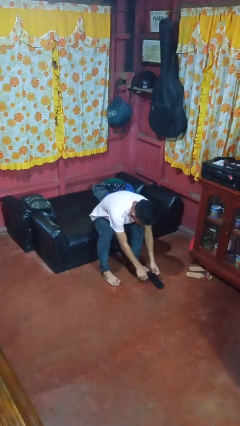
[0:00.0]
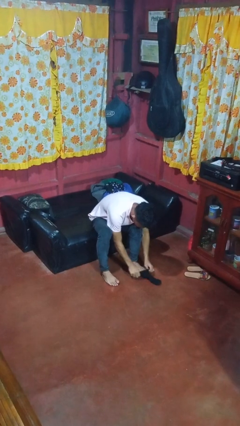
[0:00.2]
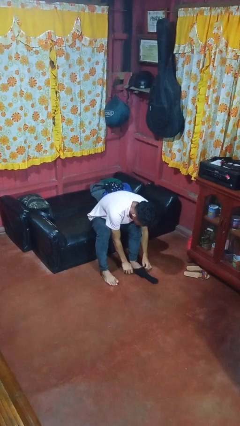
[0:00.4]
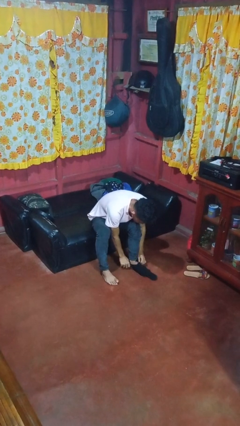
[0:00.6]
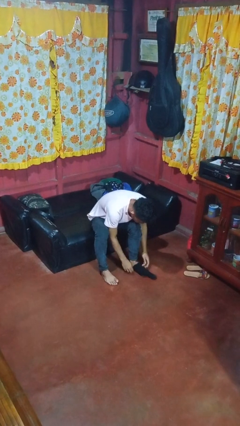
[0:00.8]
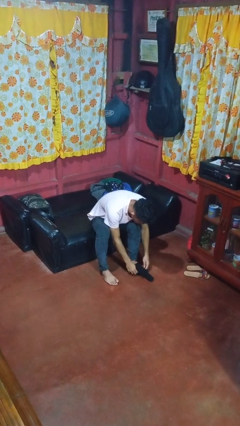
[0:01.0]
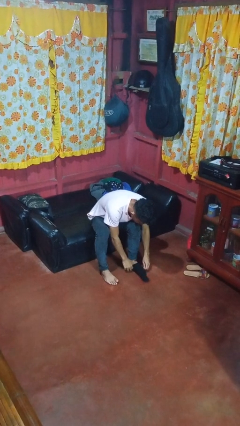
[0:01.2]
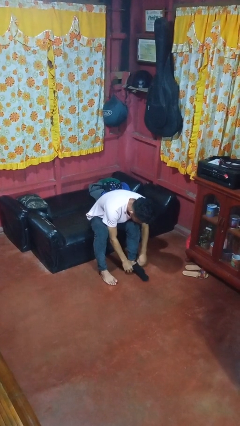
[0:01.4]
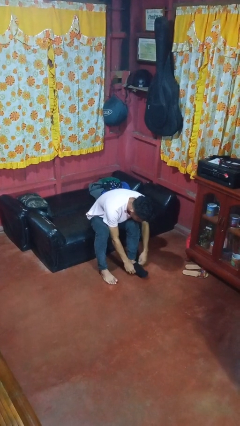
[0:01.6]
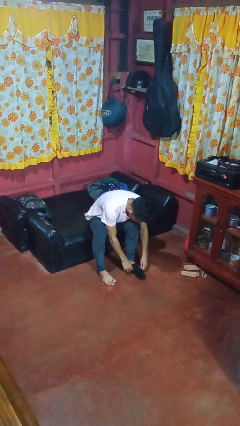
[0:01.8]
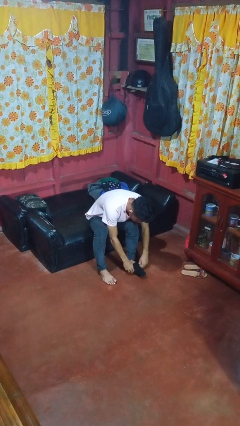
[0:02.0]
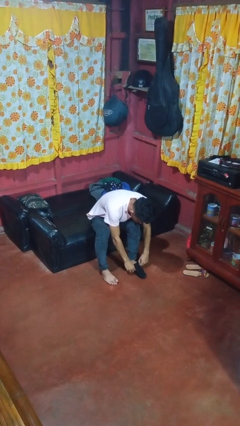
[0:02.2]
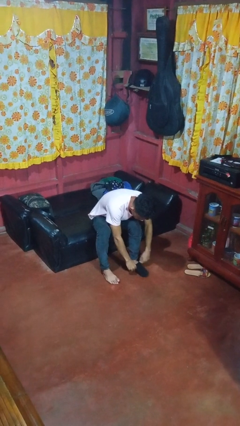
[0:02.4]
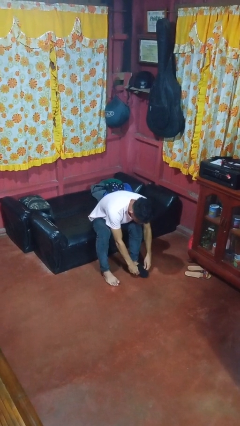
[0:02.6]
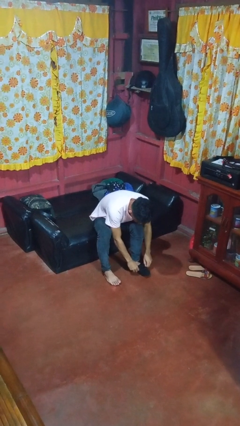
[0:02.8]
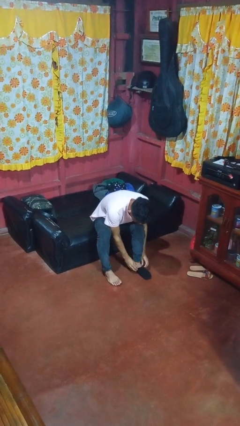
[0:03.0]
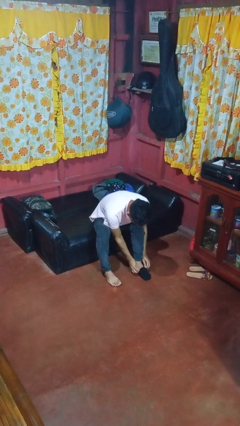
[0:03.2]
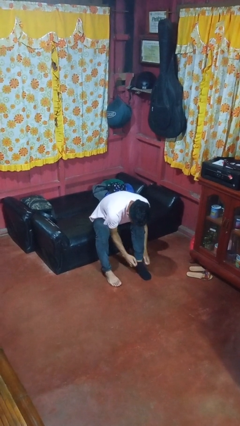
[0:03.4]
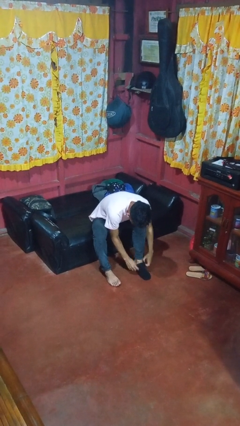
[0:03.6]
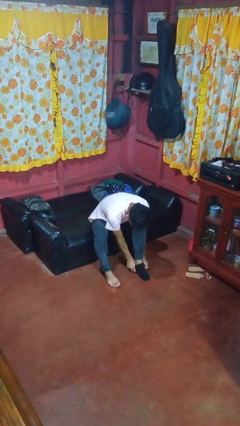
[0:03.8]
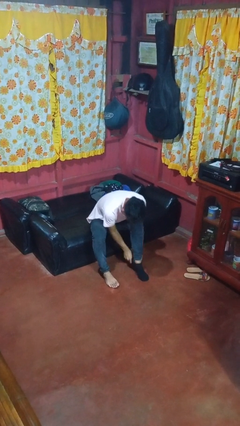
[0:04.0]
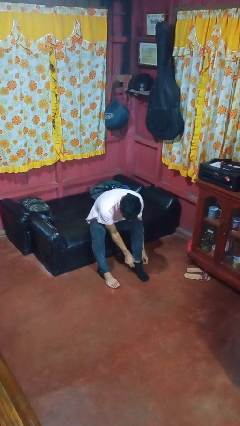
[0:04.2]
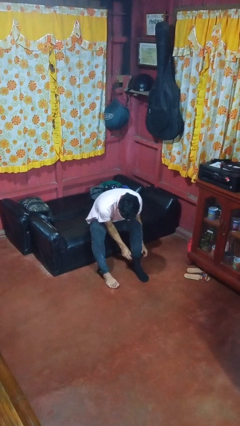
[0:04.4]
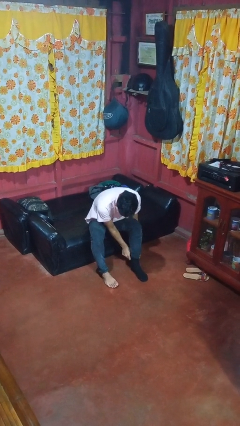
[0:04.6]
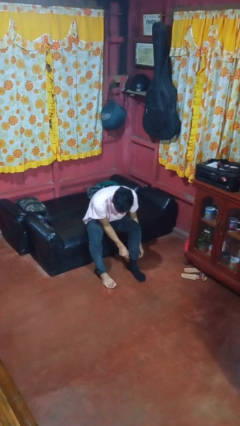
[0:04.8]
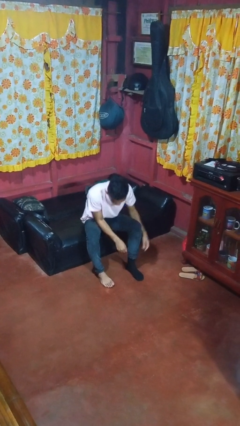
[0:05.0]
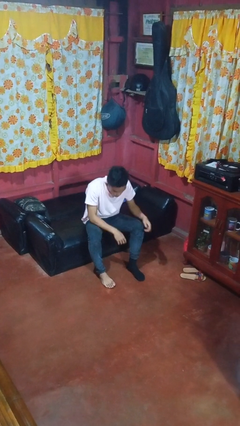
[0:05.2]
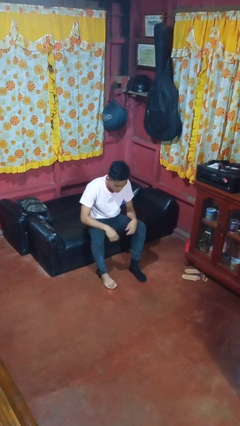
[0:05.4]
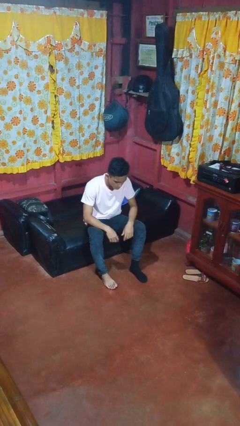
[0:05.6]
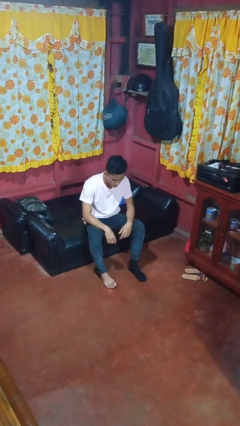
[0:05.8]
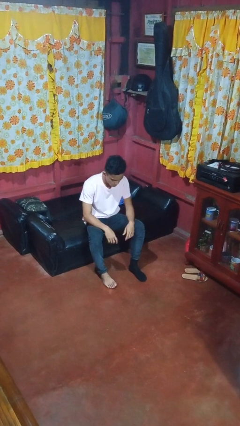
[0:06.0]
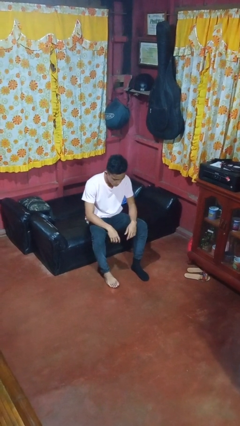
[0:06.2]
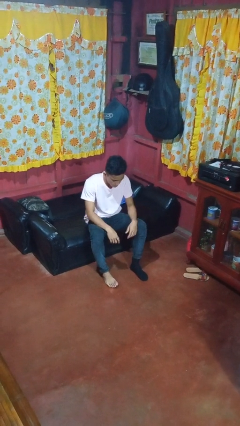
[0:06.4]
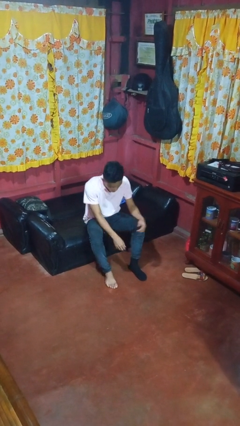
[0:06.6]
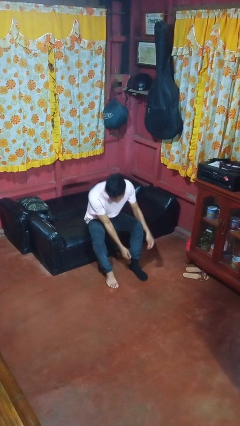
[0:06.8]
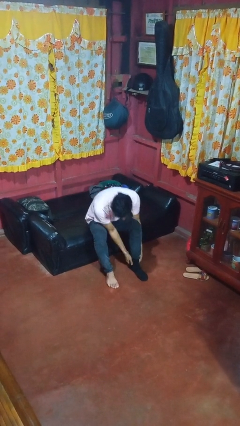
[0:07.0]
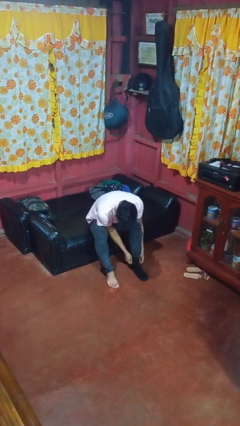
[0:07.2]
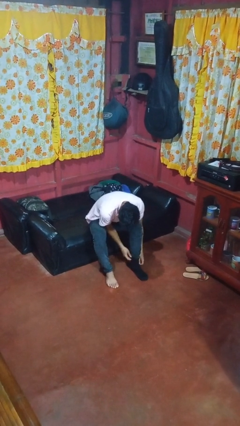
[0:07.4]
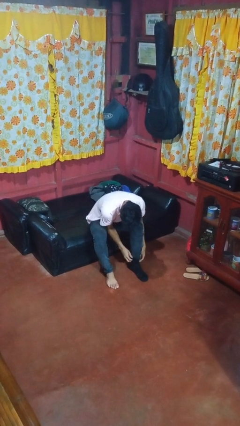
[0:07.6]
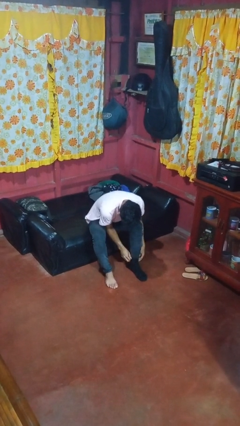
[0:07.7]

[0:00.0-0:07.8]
person puts on socks

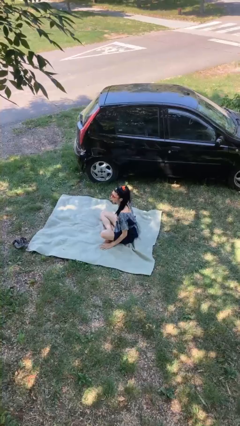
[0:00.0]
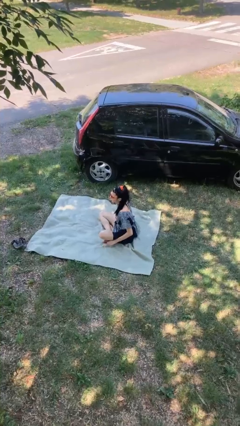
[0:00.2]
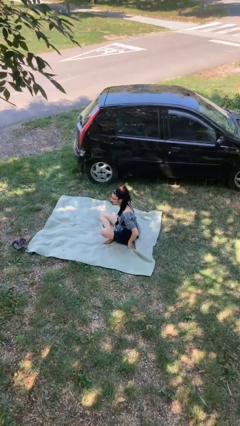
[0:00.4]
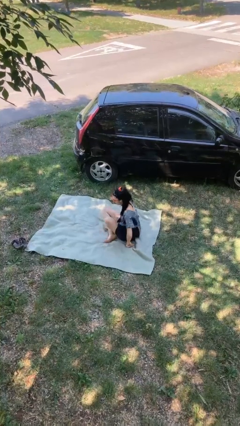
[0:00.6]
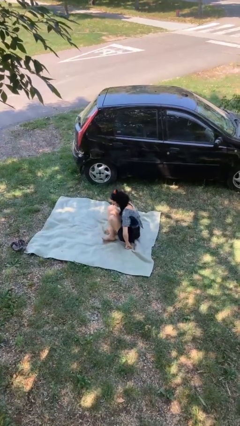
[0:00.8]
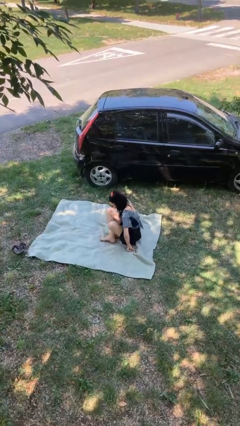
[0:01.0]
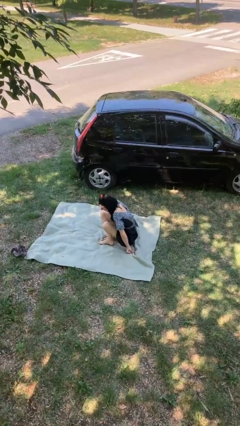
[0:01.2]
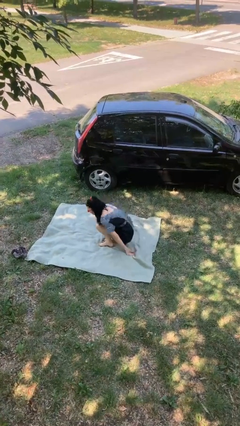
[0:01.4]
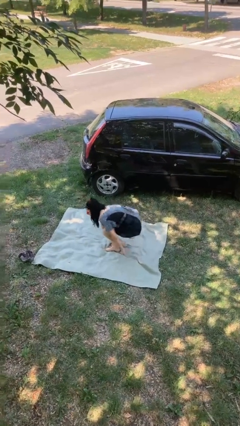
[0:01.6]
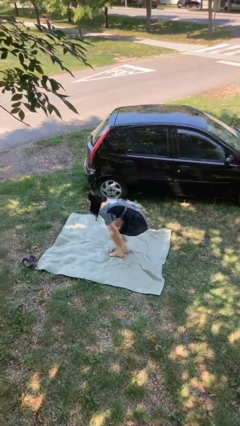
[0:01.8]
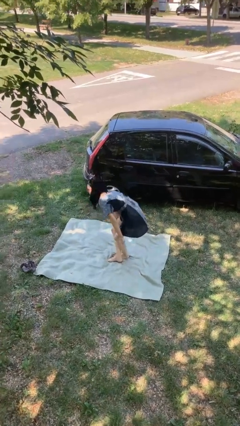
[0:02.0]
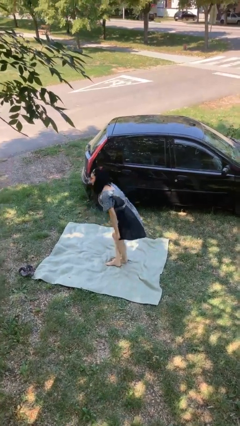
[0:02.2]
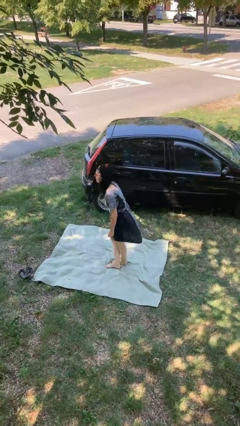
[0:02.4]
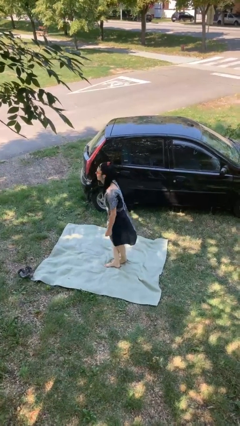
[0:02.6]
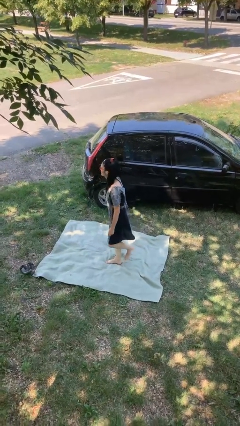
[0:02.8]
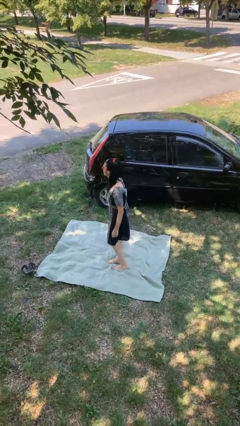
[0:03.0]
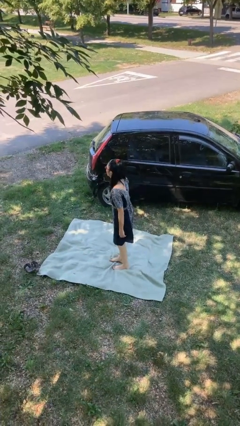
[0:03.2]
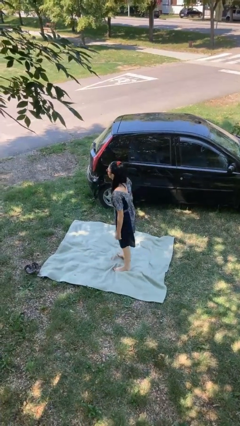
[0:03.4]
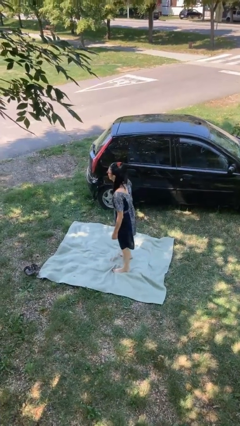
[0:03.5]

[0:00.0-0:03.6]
person stands up from floor

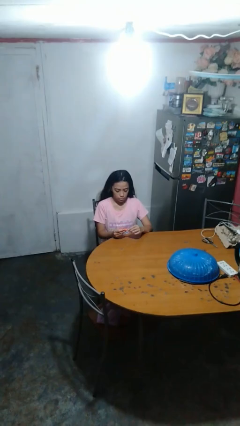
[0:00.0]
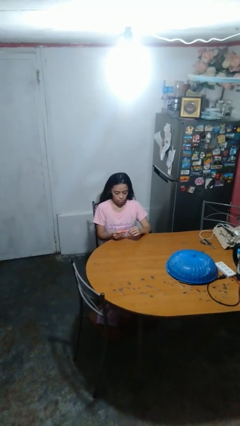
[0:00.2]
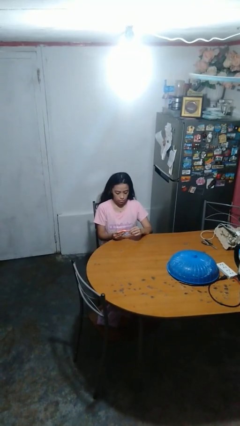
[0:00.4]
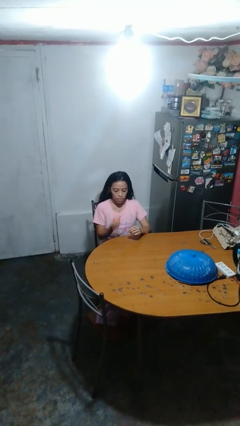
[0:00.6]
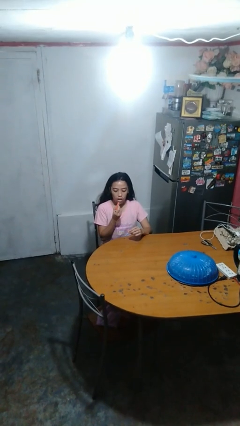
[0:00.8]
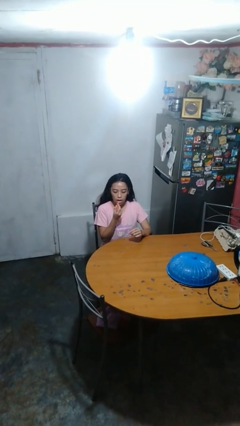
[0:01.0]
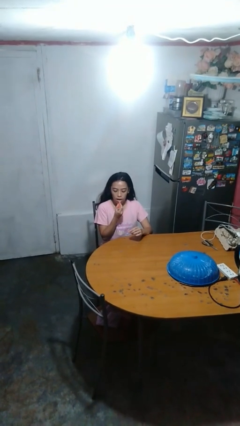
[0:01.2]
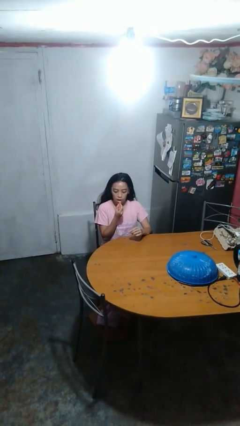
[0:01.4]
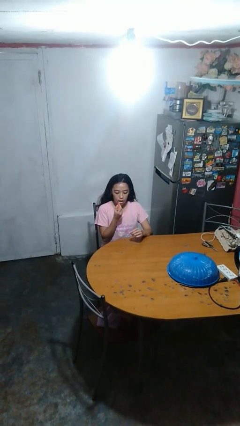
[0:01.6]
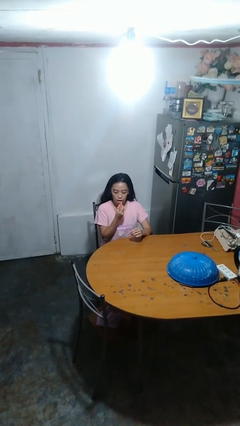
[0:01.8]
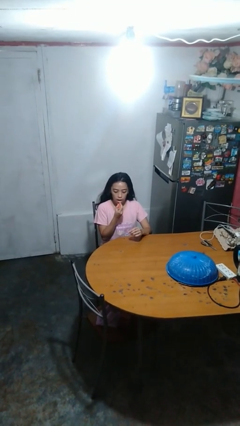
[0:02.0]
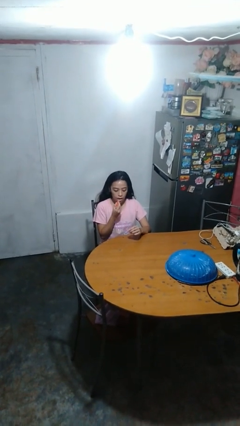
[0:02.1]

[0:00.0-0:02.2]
person applies lip makeup

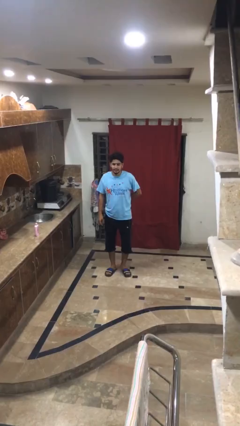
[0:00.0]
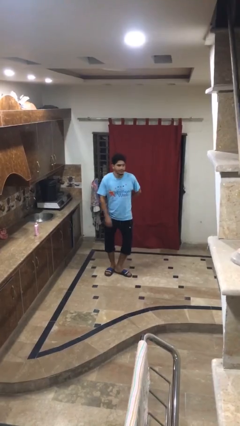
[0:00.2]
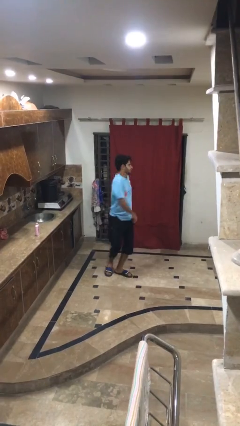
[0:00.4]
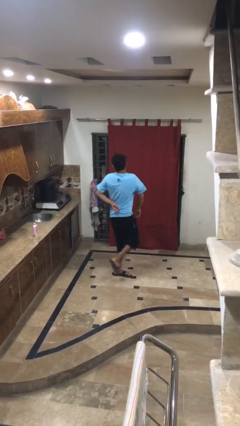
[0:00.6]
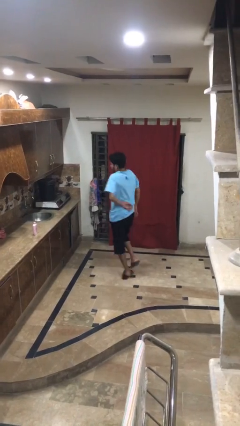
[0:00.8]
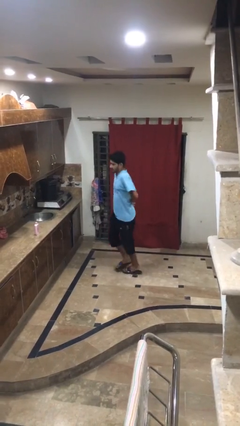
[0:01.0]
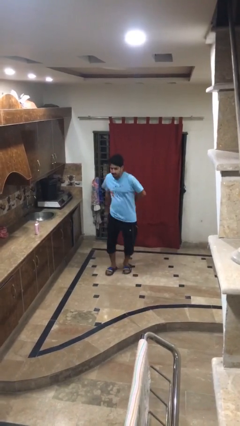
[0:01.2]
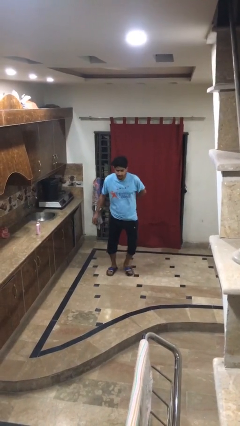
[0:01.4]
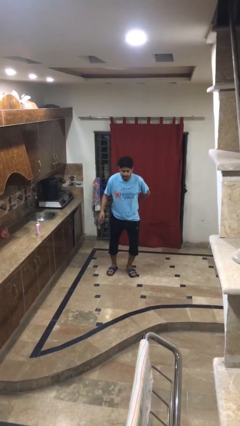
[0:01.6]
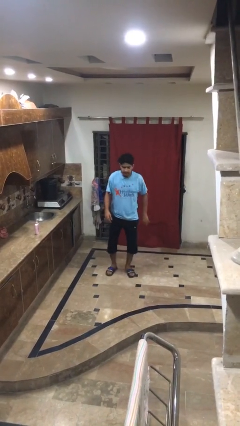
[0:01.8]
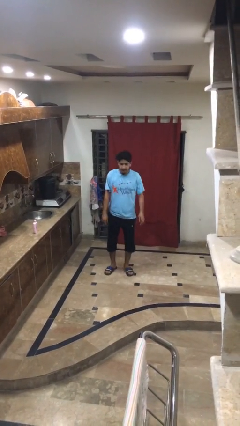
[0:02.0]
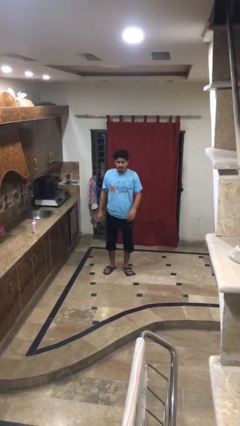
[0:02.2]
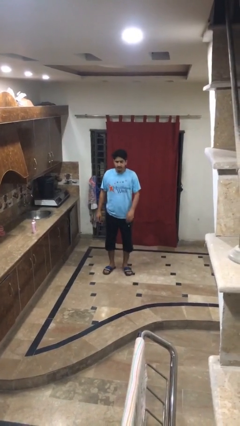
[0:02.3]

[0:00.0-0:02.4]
person twirls

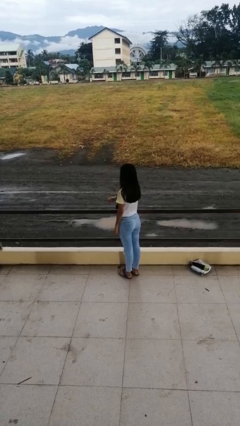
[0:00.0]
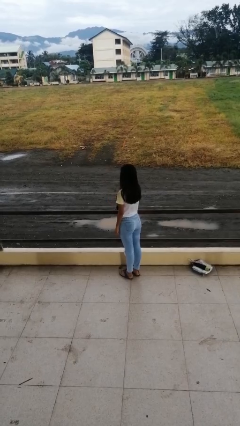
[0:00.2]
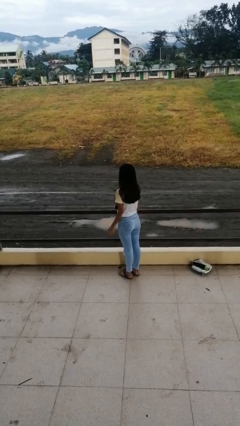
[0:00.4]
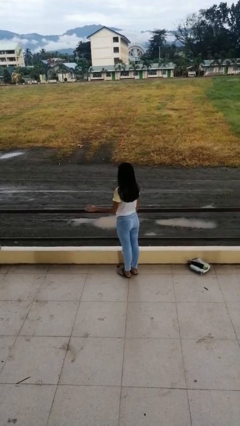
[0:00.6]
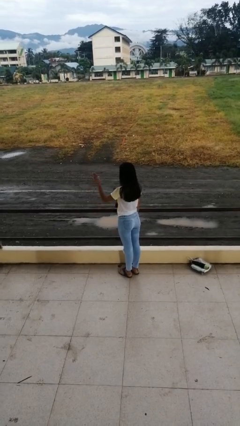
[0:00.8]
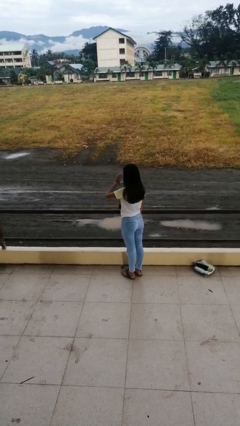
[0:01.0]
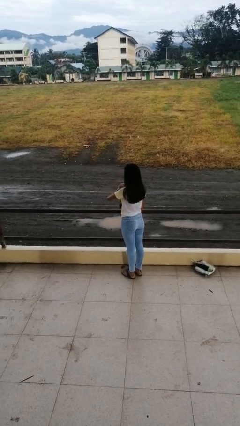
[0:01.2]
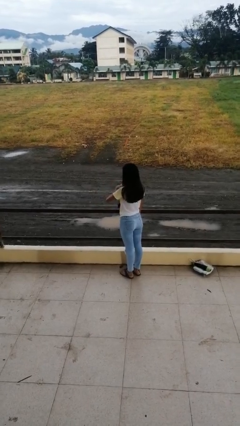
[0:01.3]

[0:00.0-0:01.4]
person gestures swipe right
